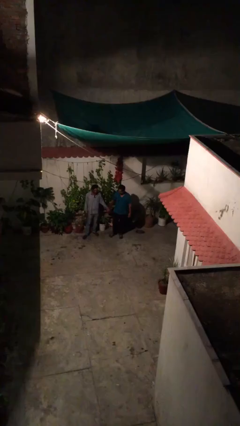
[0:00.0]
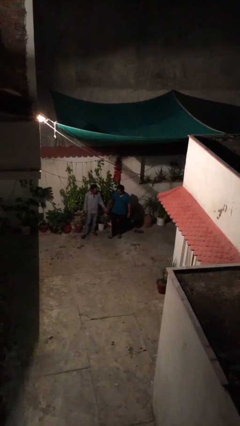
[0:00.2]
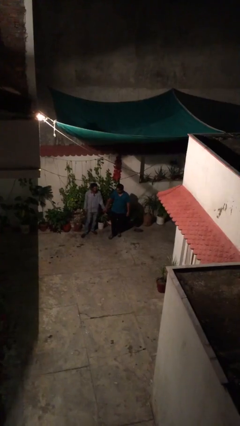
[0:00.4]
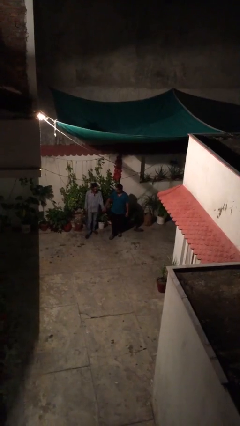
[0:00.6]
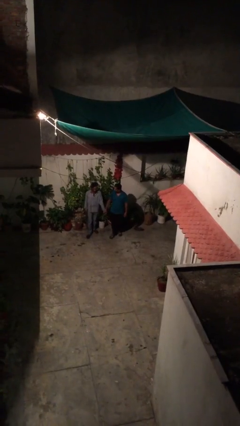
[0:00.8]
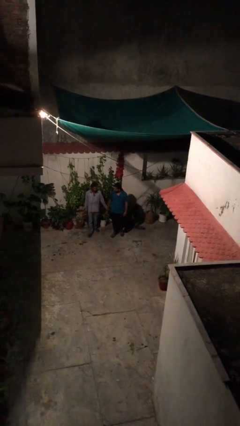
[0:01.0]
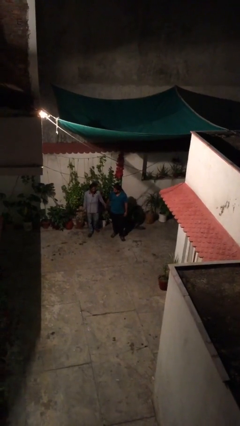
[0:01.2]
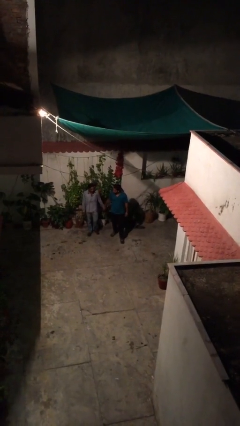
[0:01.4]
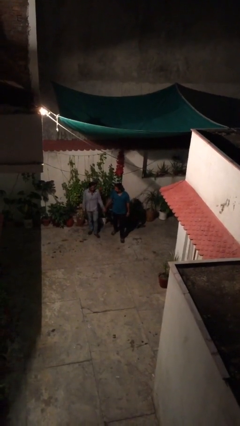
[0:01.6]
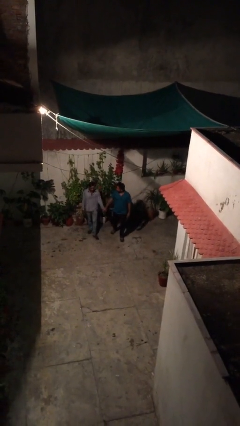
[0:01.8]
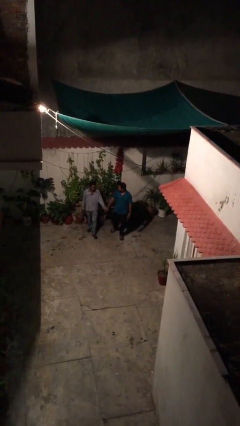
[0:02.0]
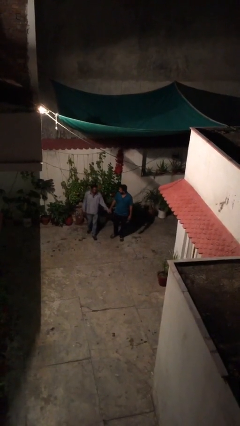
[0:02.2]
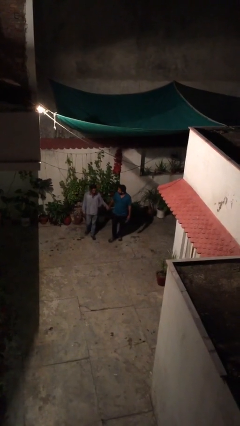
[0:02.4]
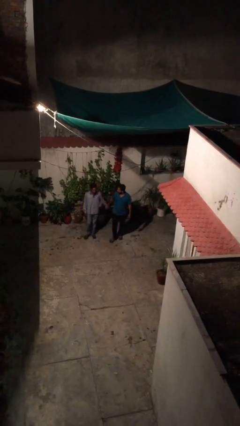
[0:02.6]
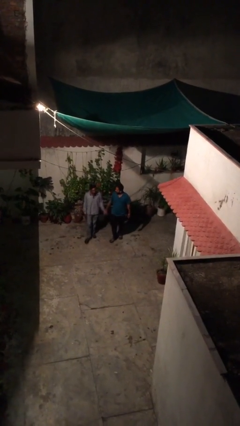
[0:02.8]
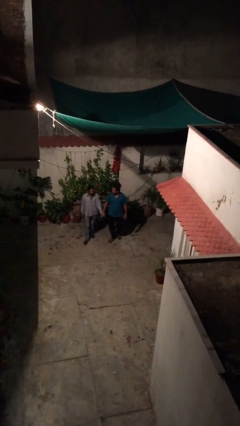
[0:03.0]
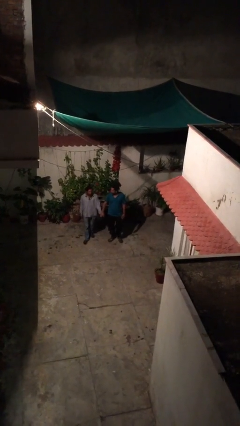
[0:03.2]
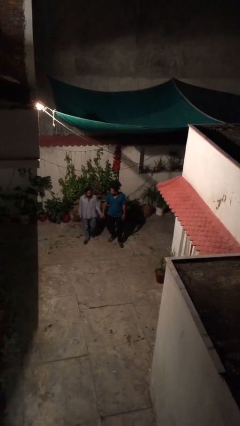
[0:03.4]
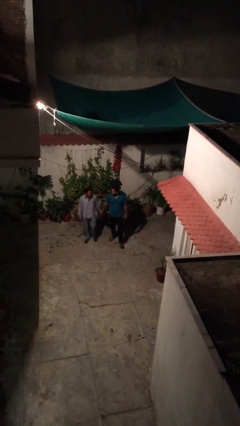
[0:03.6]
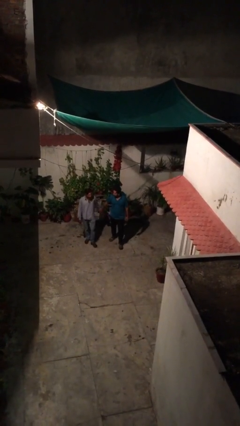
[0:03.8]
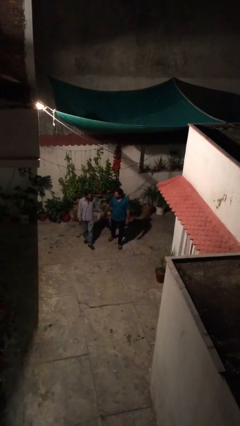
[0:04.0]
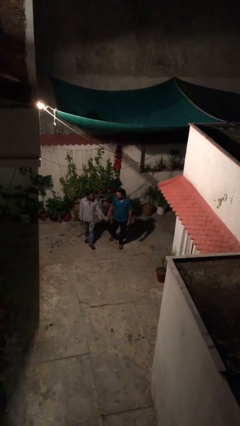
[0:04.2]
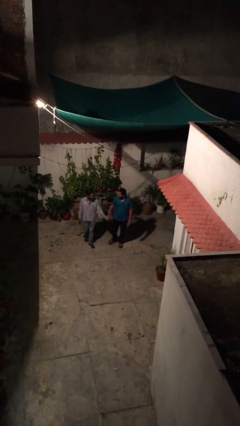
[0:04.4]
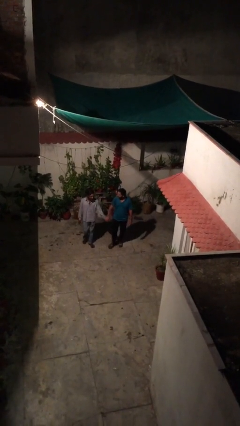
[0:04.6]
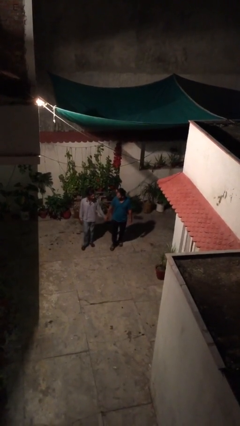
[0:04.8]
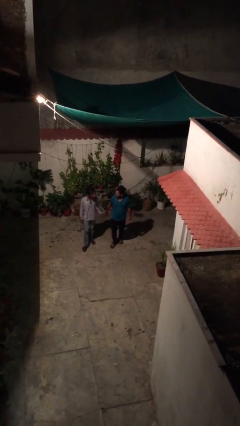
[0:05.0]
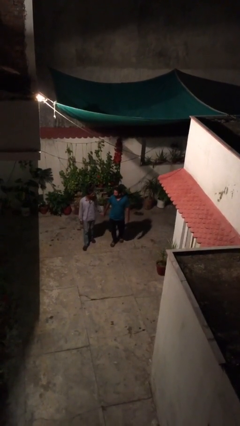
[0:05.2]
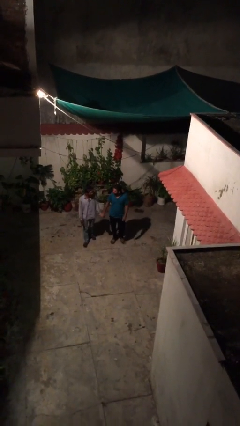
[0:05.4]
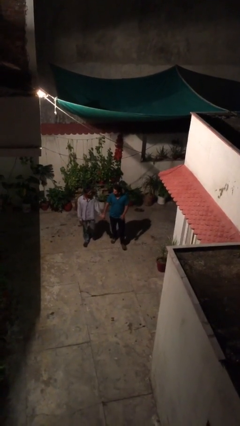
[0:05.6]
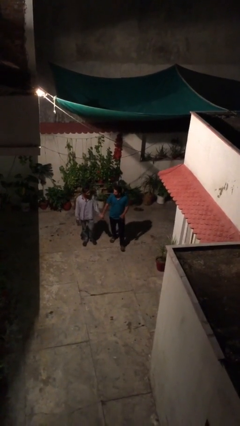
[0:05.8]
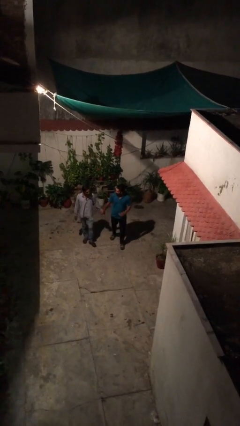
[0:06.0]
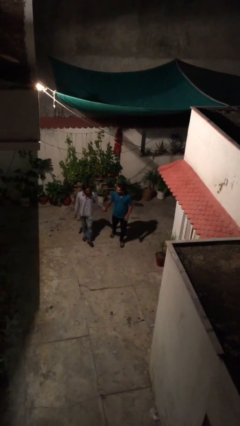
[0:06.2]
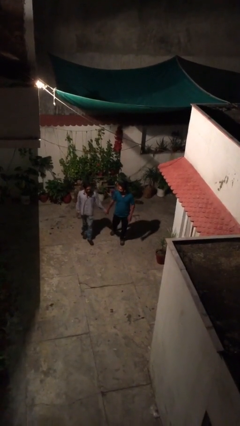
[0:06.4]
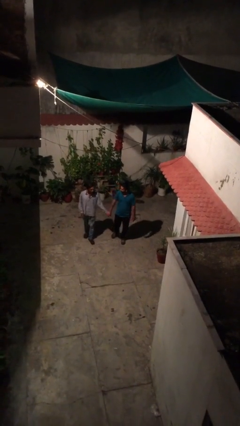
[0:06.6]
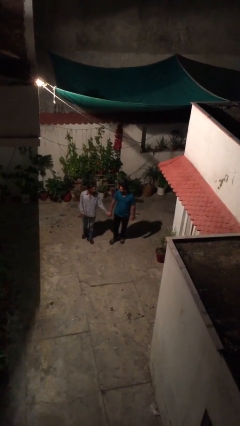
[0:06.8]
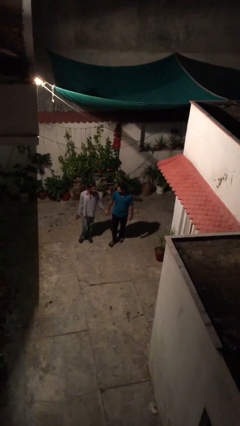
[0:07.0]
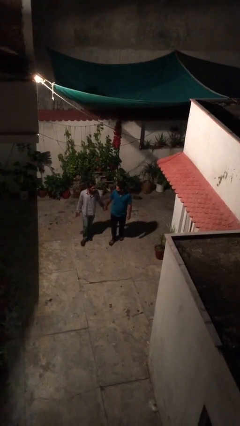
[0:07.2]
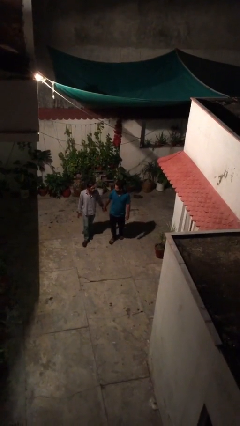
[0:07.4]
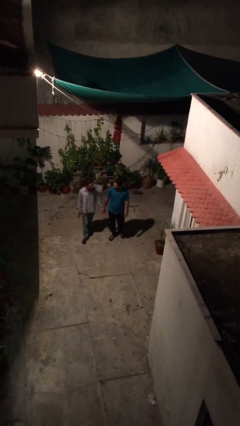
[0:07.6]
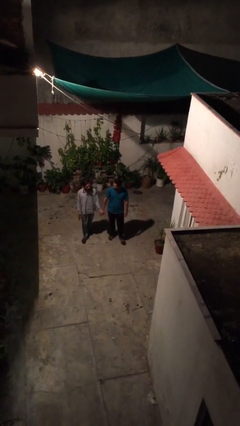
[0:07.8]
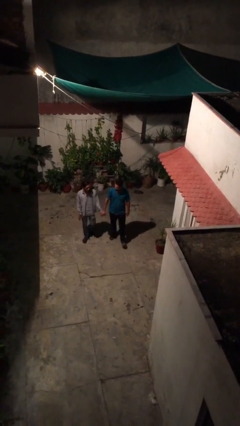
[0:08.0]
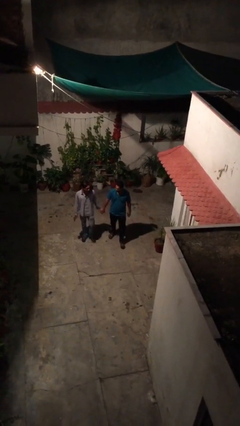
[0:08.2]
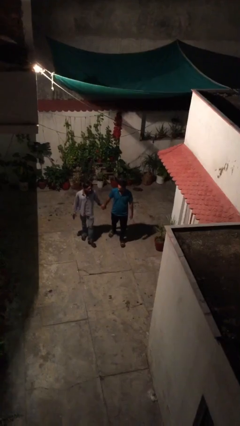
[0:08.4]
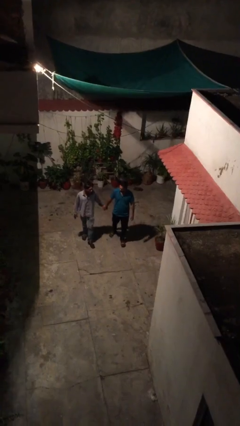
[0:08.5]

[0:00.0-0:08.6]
person holds hand

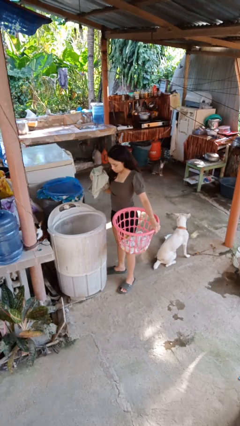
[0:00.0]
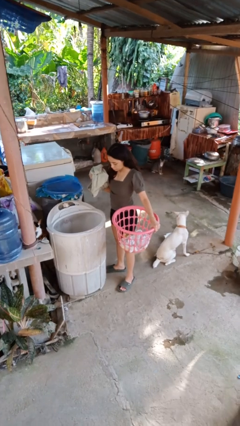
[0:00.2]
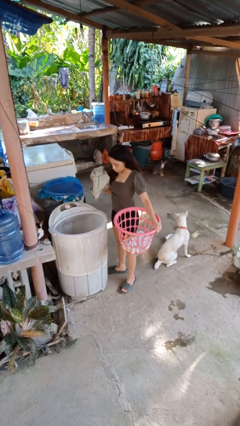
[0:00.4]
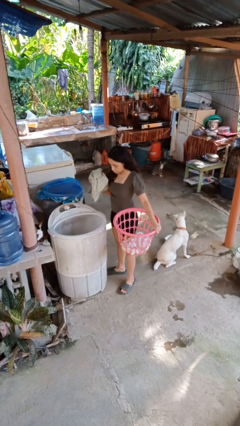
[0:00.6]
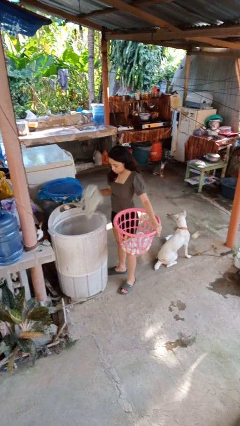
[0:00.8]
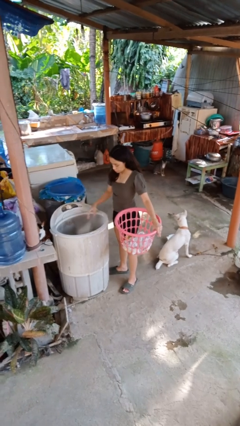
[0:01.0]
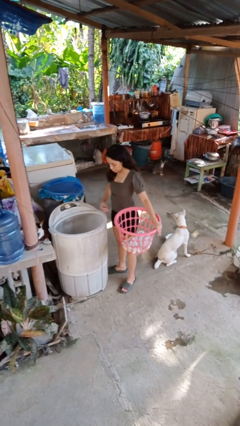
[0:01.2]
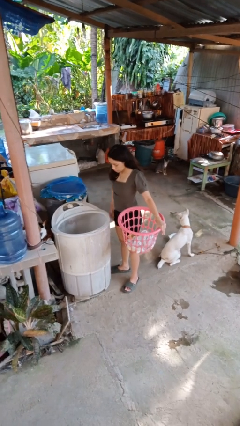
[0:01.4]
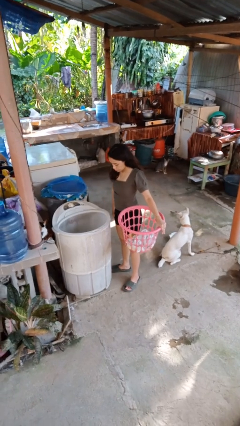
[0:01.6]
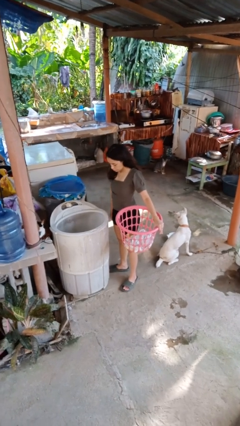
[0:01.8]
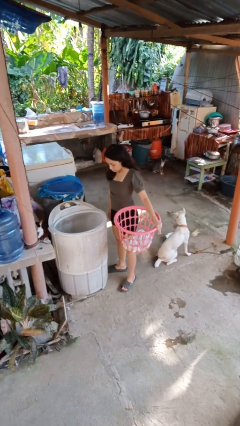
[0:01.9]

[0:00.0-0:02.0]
person loads dryer

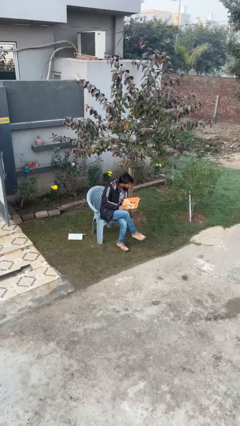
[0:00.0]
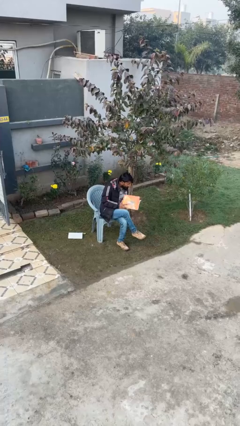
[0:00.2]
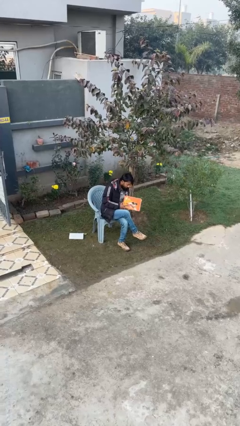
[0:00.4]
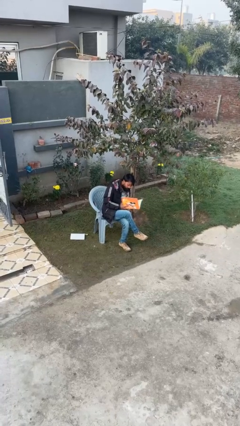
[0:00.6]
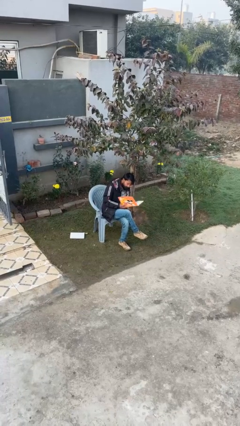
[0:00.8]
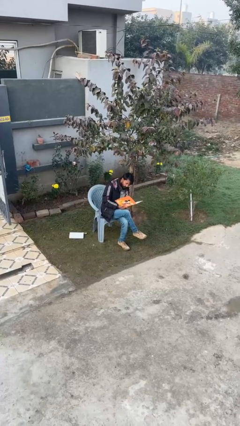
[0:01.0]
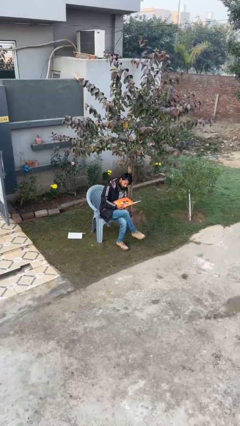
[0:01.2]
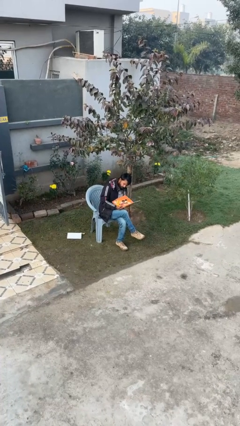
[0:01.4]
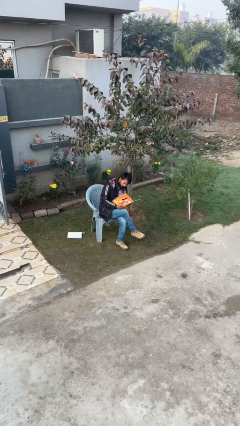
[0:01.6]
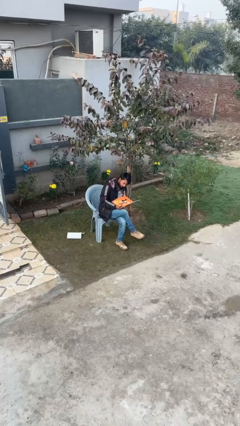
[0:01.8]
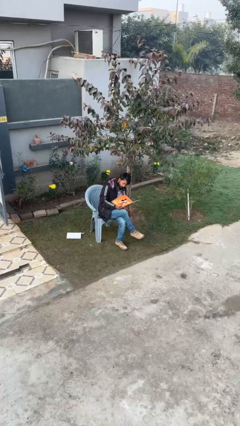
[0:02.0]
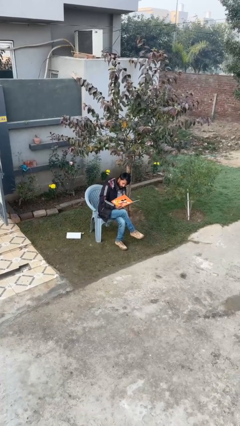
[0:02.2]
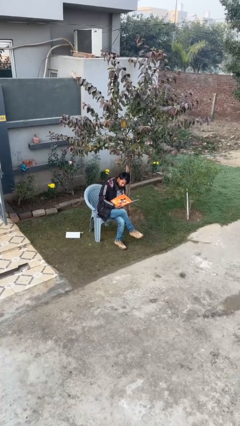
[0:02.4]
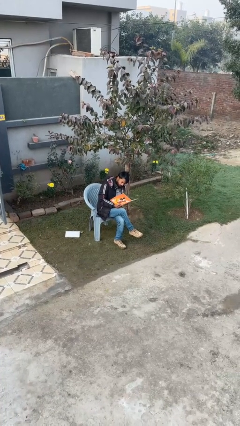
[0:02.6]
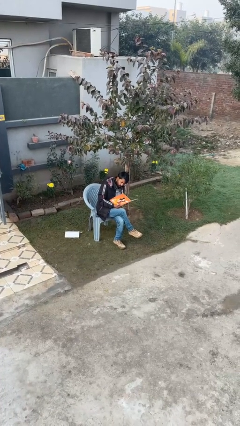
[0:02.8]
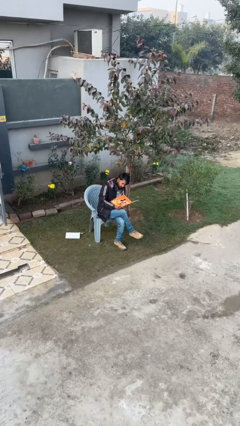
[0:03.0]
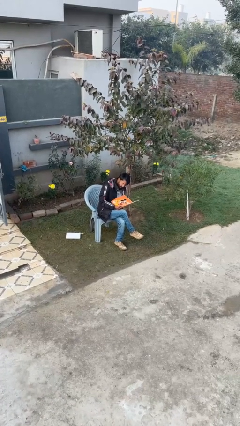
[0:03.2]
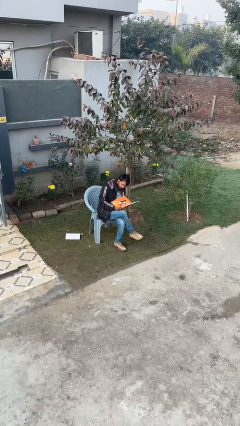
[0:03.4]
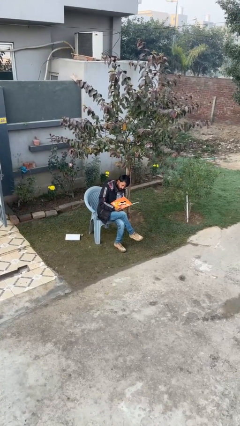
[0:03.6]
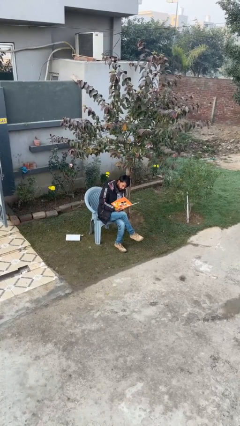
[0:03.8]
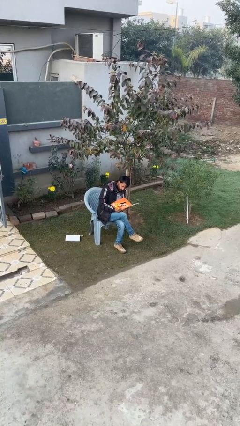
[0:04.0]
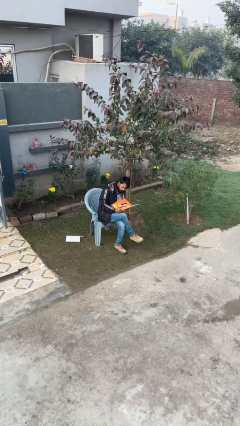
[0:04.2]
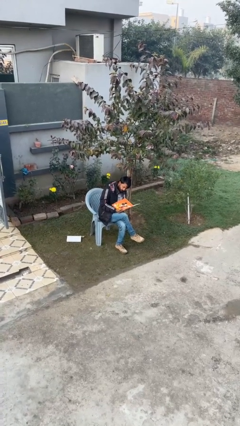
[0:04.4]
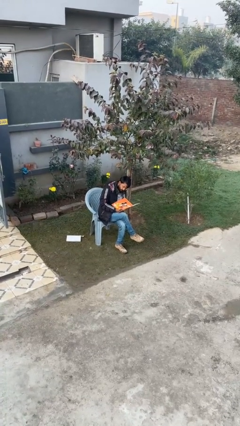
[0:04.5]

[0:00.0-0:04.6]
person reads document

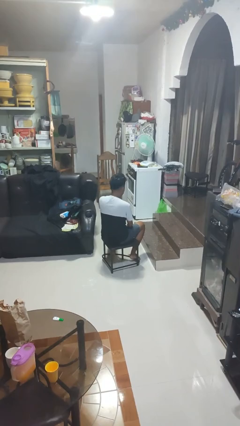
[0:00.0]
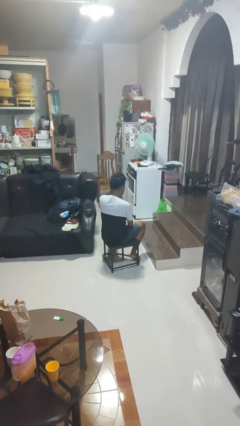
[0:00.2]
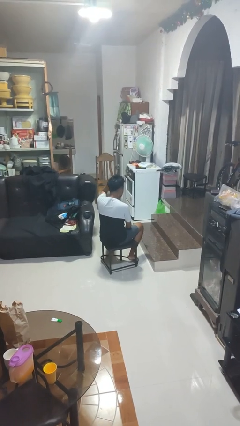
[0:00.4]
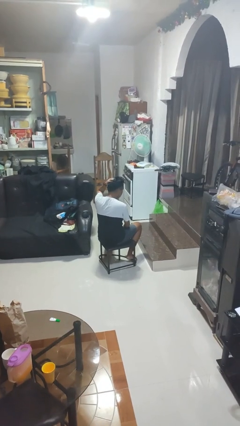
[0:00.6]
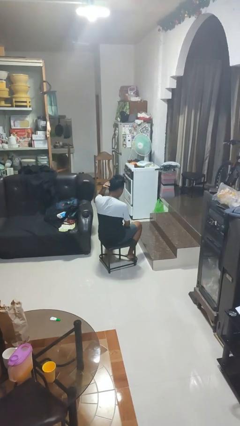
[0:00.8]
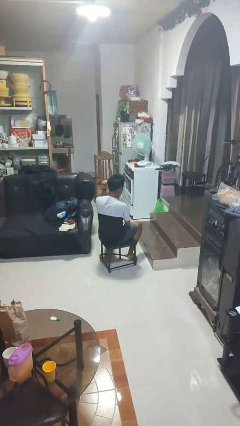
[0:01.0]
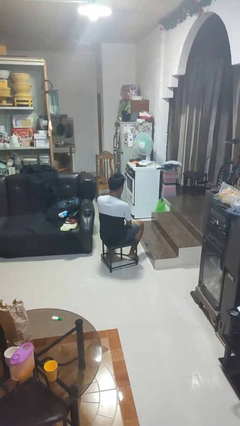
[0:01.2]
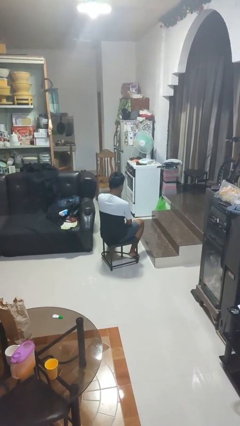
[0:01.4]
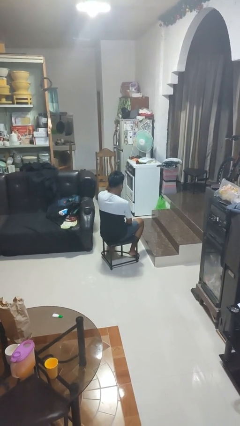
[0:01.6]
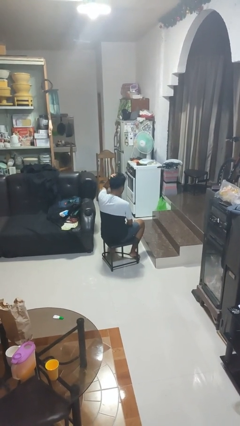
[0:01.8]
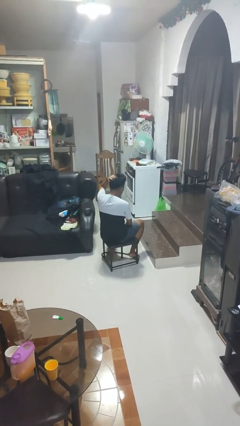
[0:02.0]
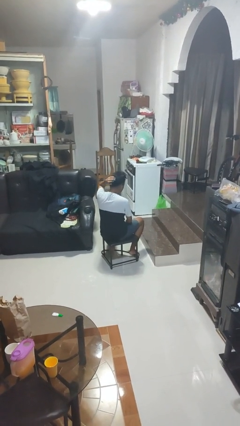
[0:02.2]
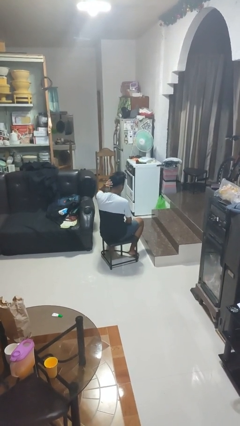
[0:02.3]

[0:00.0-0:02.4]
person strokes hair

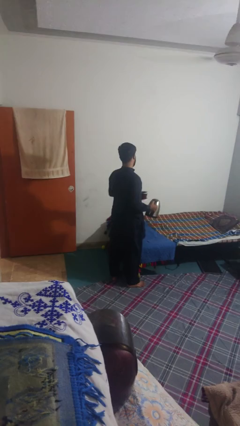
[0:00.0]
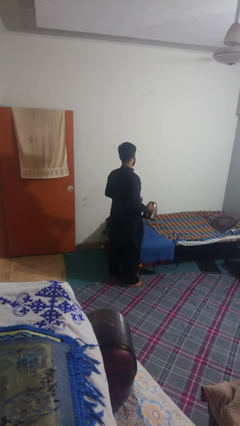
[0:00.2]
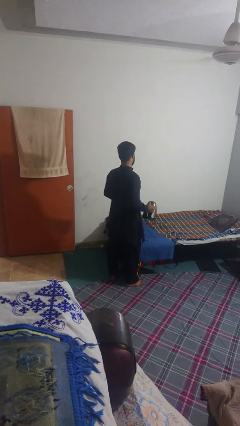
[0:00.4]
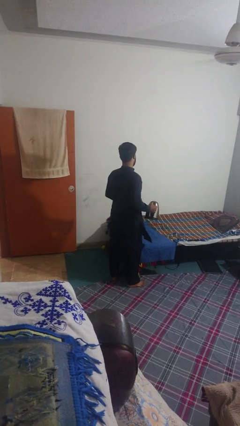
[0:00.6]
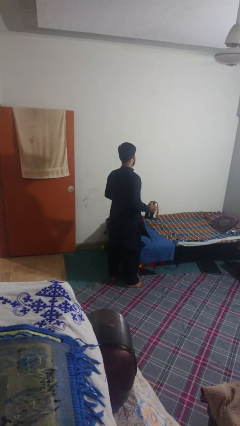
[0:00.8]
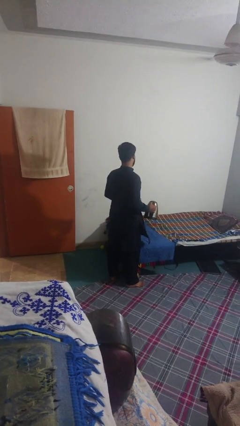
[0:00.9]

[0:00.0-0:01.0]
person pours coffee into mug
